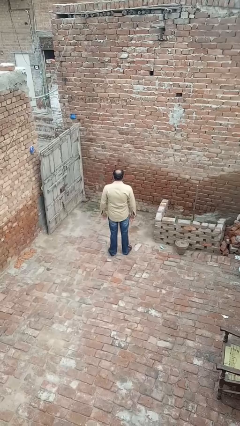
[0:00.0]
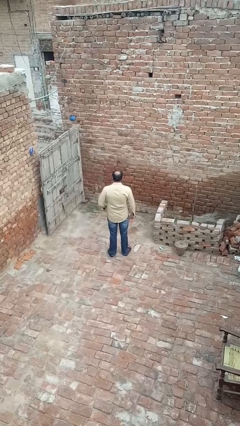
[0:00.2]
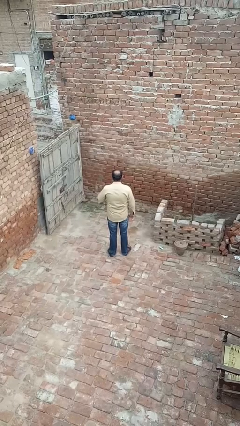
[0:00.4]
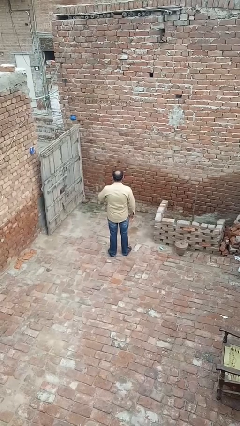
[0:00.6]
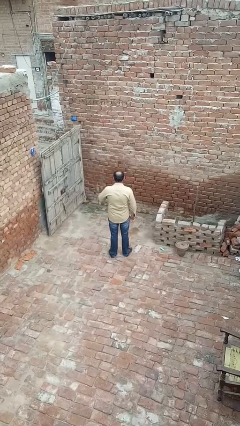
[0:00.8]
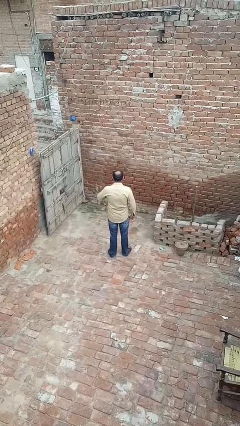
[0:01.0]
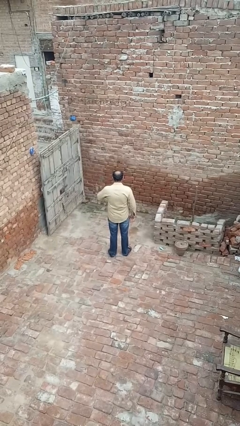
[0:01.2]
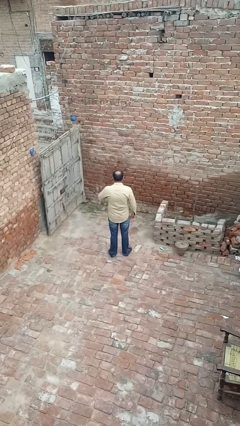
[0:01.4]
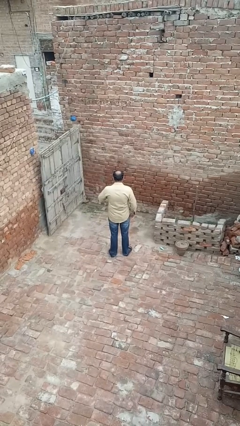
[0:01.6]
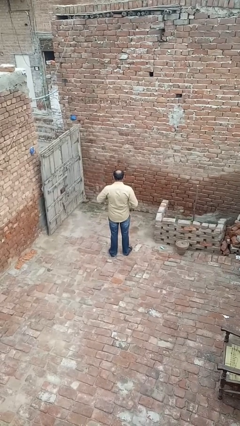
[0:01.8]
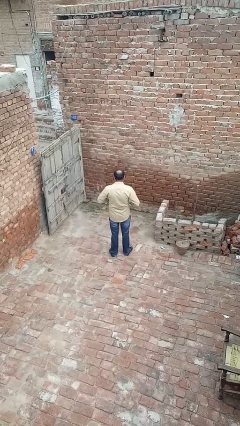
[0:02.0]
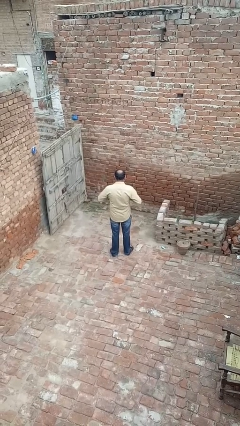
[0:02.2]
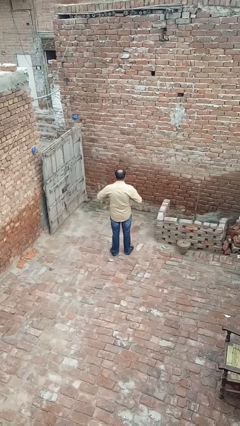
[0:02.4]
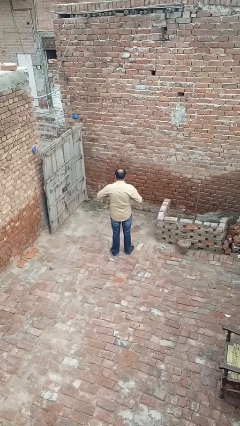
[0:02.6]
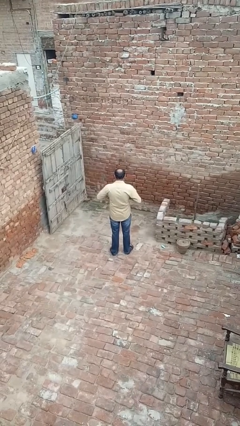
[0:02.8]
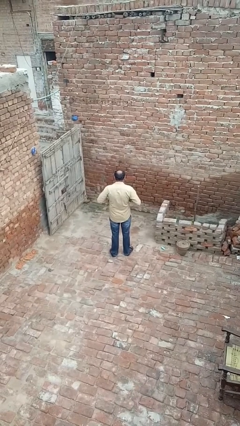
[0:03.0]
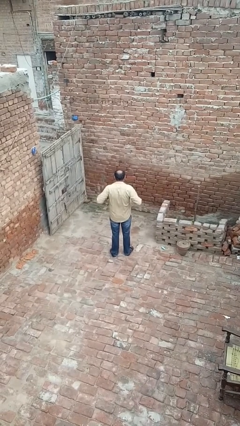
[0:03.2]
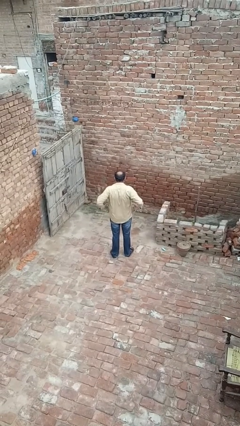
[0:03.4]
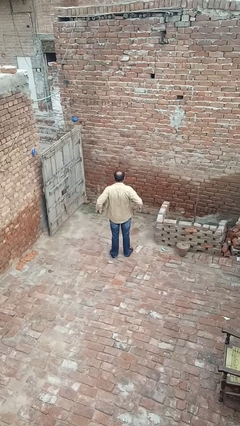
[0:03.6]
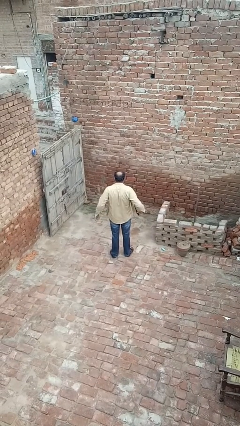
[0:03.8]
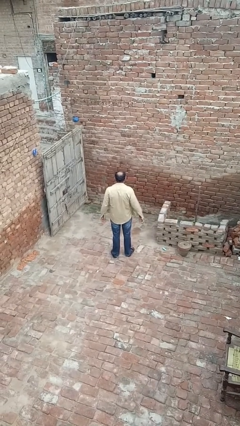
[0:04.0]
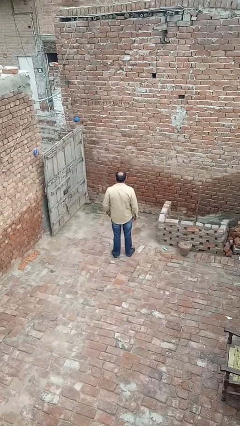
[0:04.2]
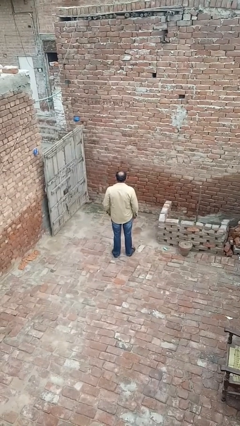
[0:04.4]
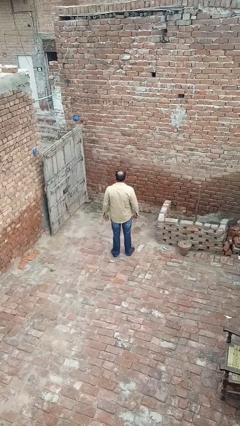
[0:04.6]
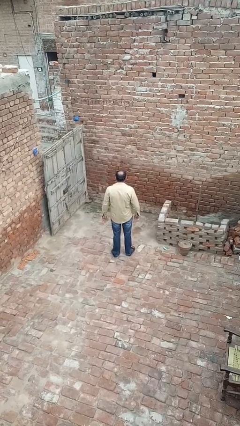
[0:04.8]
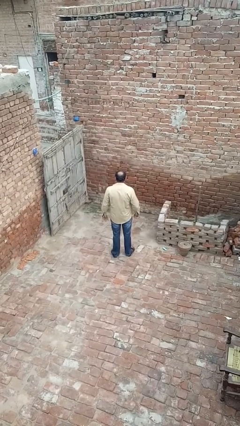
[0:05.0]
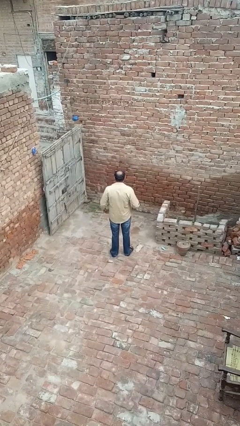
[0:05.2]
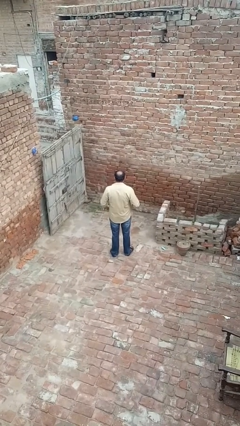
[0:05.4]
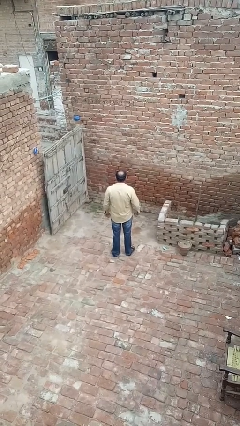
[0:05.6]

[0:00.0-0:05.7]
person unbuttons shirt

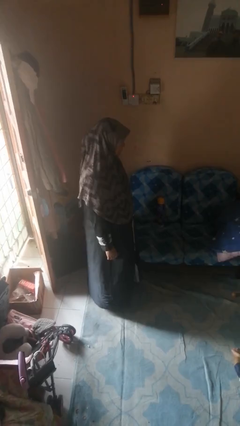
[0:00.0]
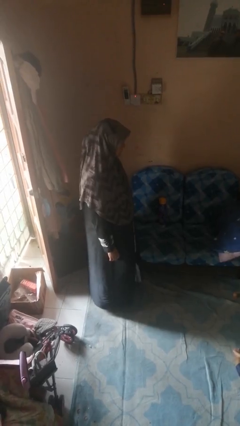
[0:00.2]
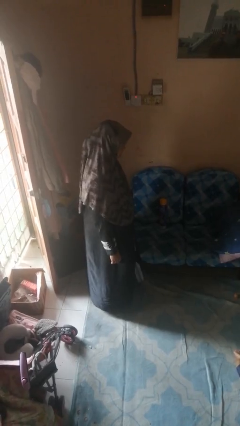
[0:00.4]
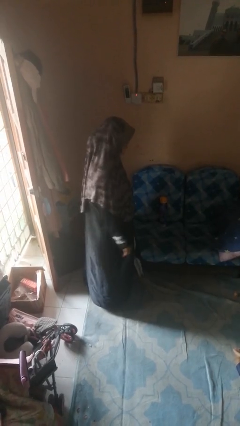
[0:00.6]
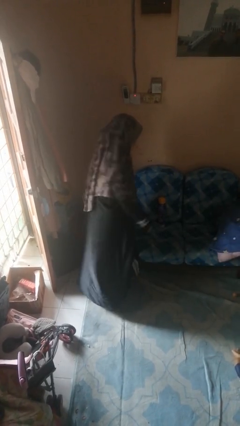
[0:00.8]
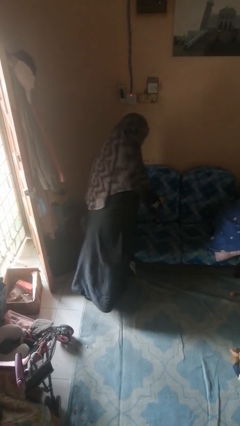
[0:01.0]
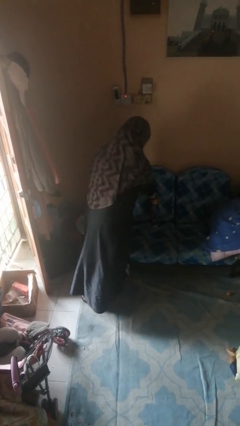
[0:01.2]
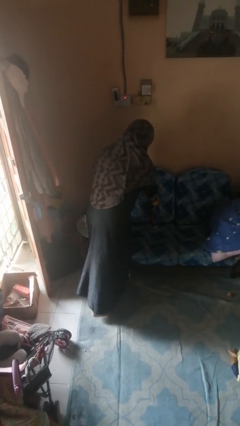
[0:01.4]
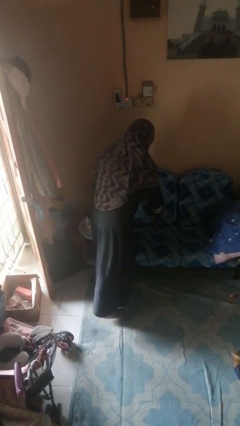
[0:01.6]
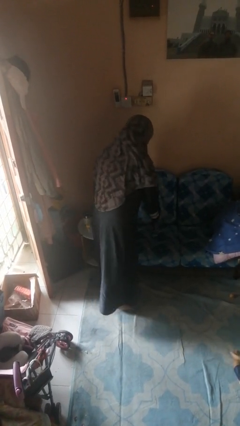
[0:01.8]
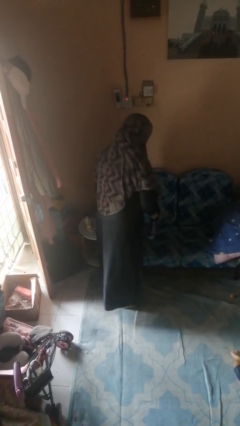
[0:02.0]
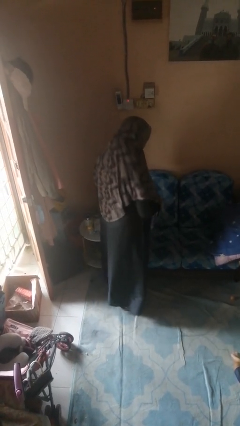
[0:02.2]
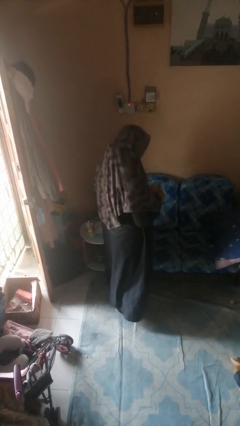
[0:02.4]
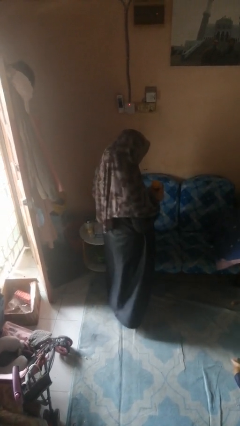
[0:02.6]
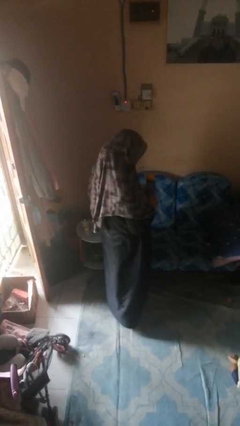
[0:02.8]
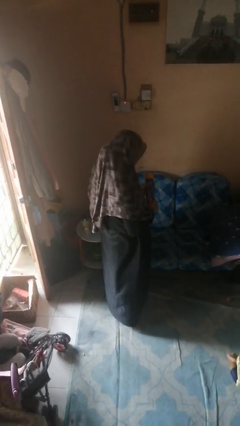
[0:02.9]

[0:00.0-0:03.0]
person picks up object from couch

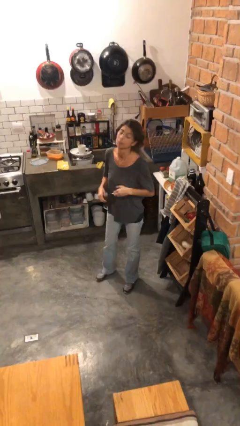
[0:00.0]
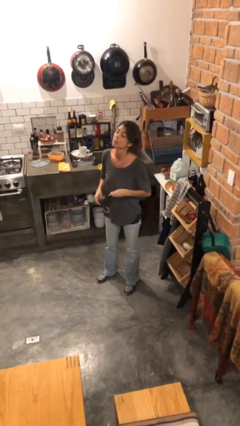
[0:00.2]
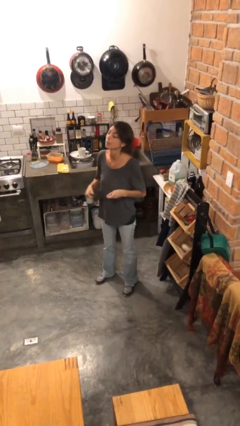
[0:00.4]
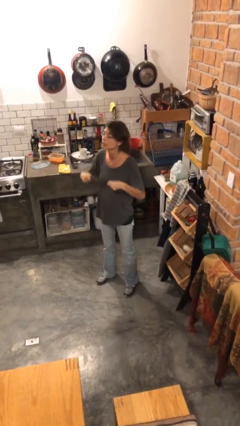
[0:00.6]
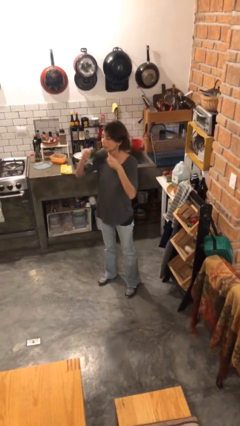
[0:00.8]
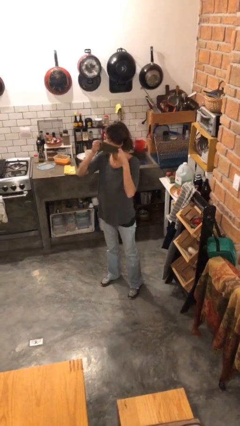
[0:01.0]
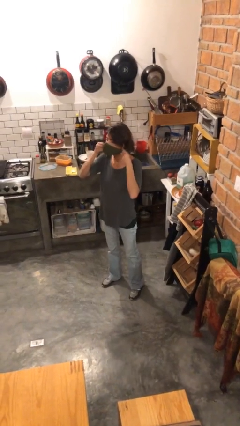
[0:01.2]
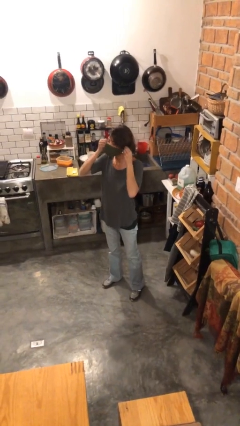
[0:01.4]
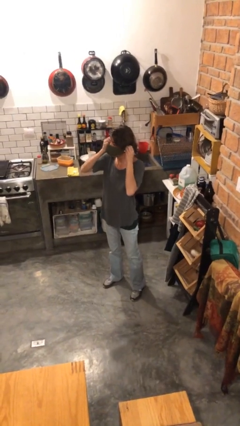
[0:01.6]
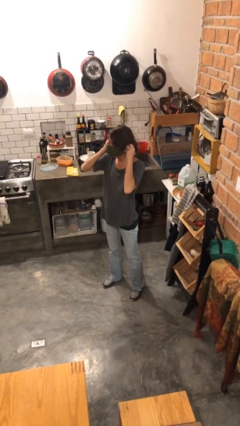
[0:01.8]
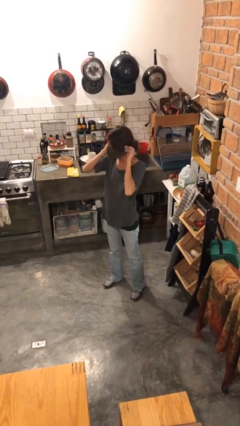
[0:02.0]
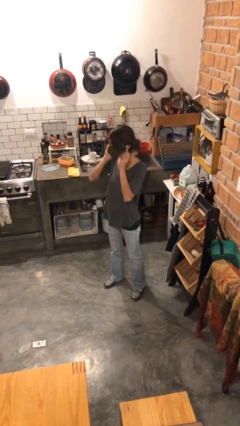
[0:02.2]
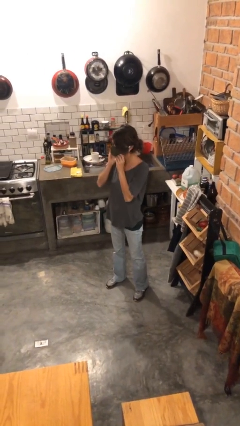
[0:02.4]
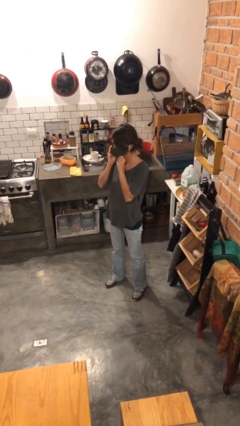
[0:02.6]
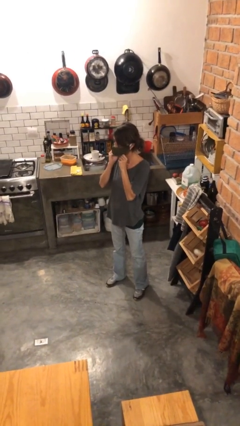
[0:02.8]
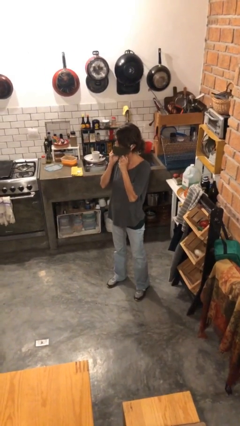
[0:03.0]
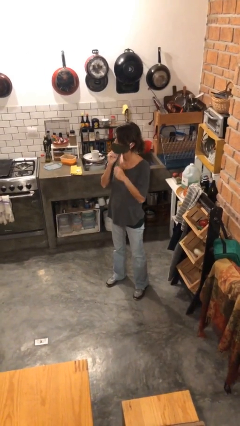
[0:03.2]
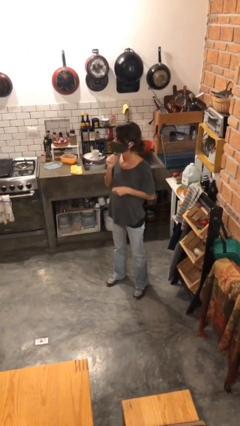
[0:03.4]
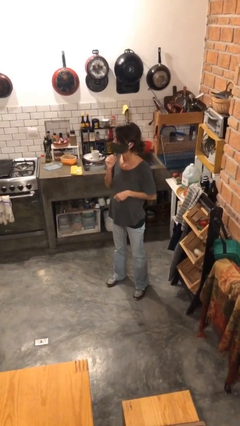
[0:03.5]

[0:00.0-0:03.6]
person puts on facemask

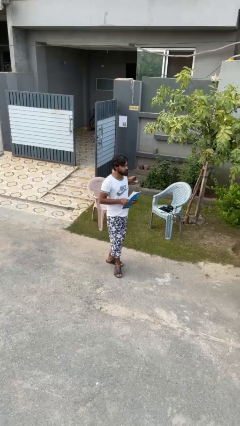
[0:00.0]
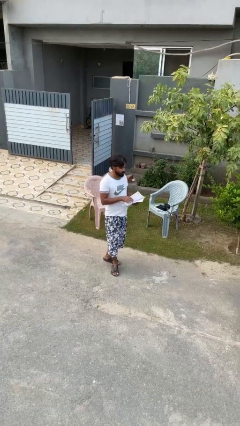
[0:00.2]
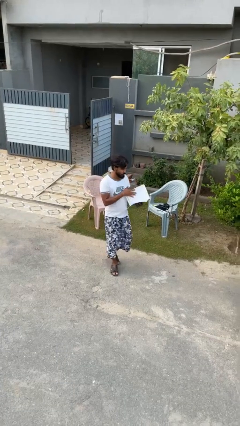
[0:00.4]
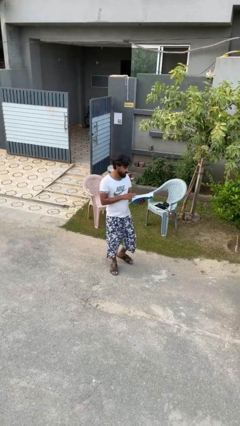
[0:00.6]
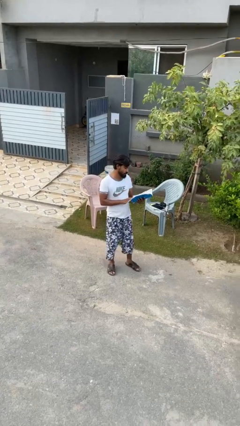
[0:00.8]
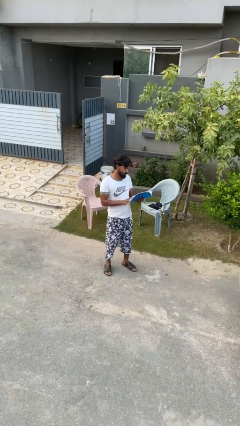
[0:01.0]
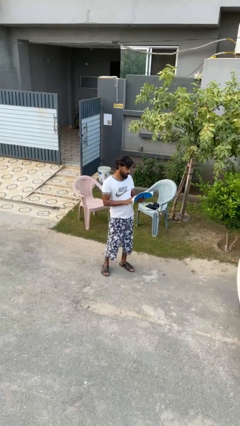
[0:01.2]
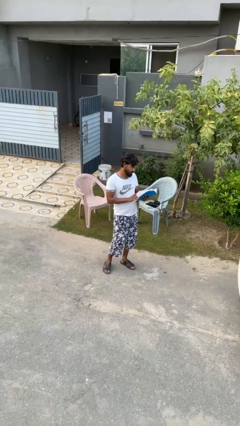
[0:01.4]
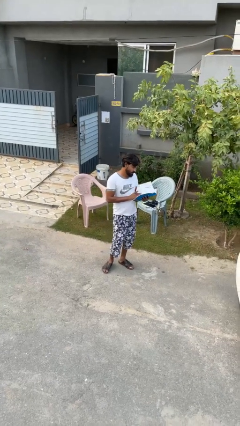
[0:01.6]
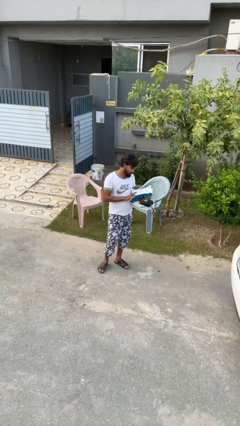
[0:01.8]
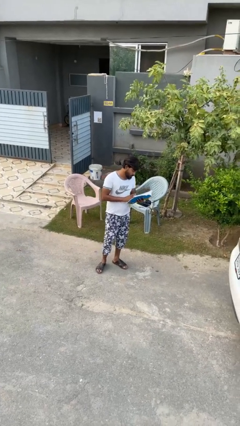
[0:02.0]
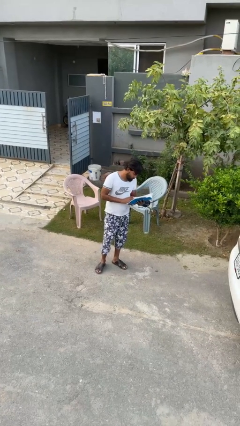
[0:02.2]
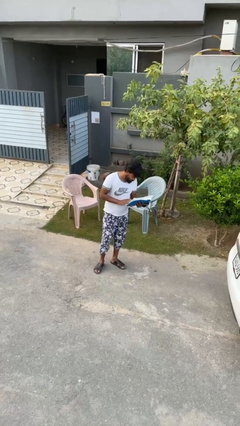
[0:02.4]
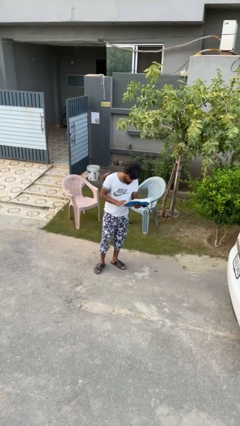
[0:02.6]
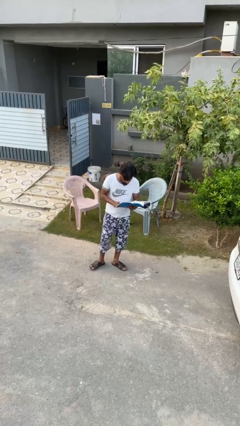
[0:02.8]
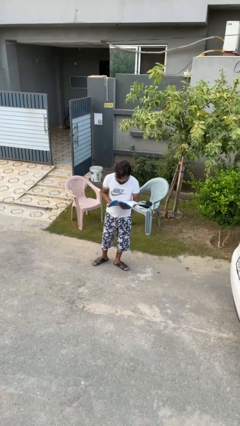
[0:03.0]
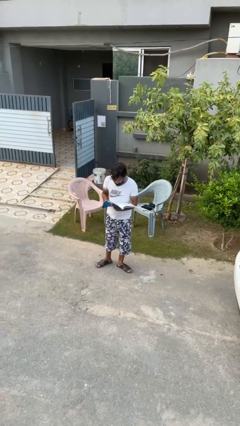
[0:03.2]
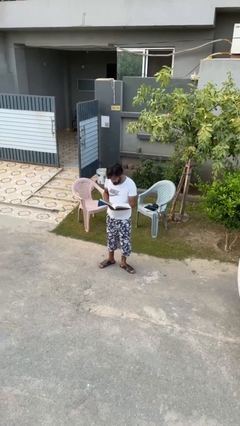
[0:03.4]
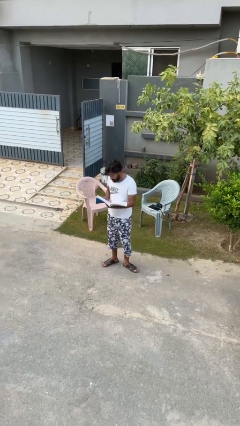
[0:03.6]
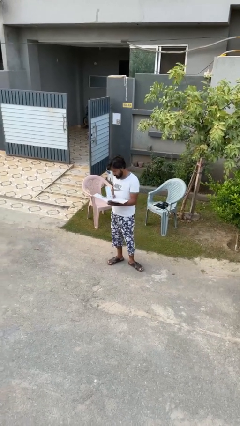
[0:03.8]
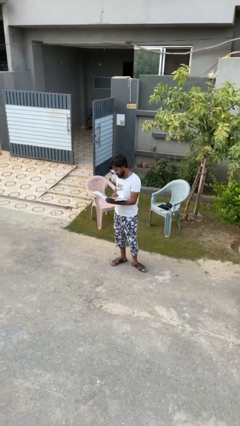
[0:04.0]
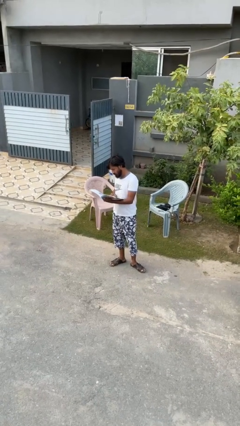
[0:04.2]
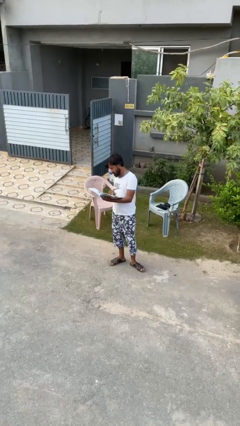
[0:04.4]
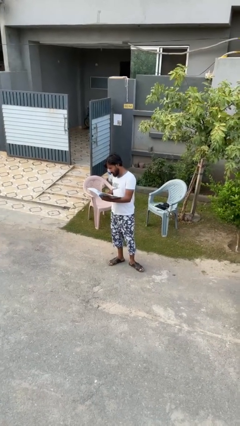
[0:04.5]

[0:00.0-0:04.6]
person reads book

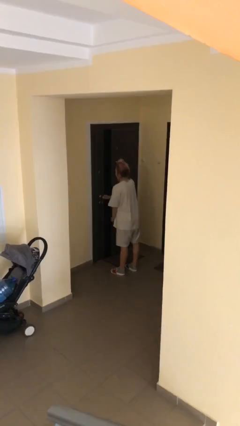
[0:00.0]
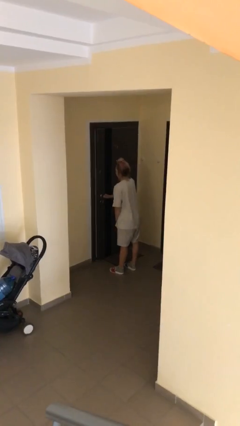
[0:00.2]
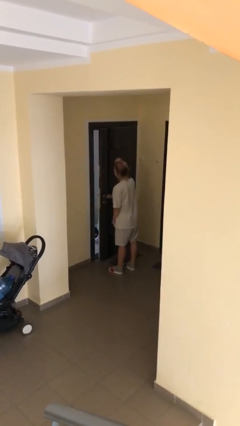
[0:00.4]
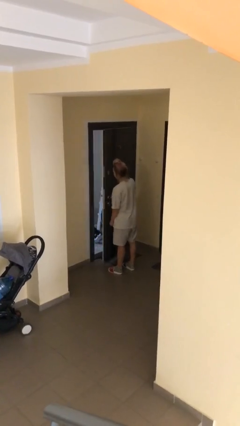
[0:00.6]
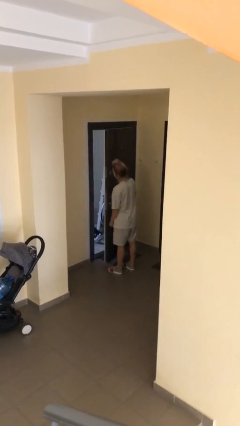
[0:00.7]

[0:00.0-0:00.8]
person opens facility door

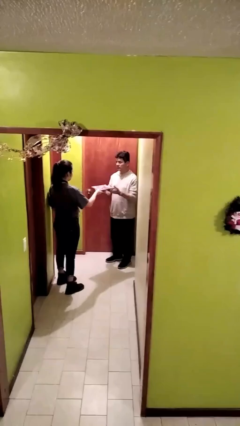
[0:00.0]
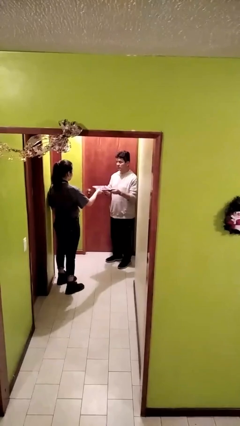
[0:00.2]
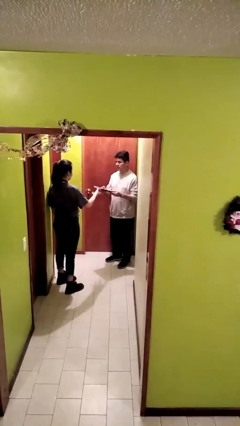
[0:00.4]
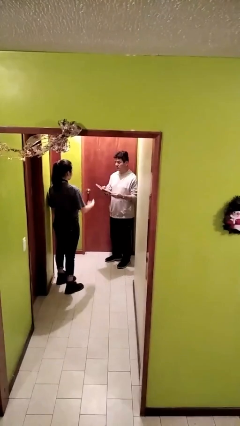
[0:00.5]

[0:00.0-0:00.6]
person transfers object to person
